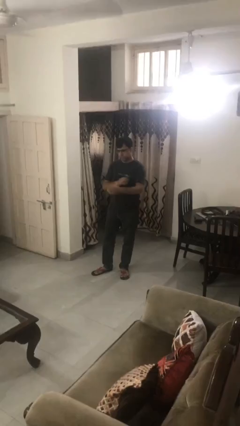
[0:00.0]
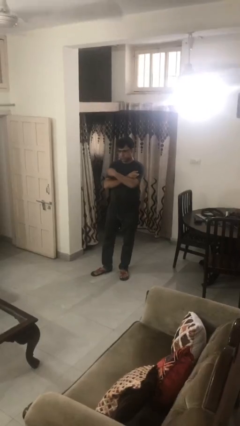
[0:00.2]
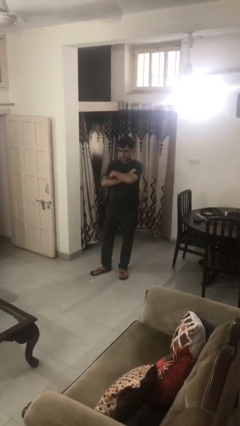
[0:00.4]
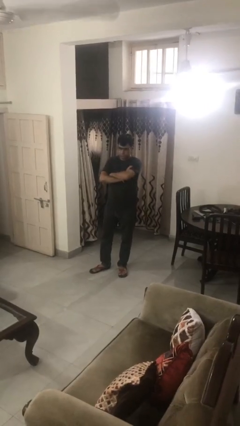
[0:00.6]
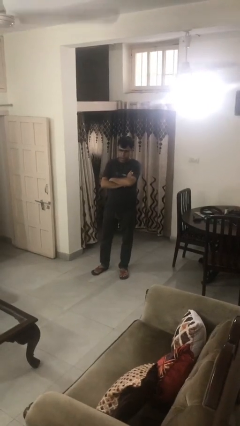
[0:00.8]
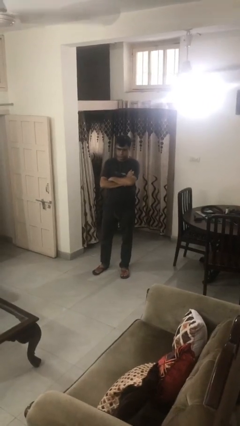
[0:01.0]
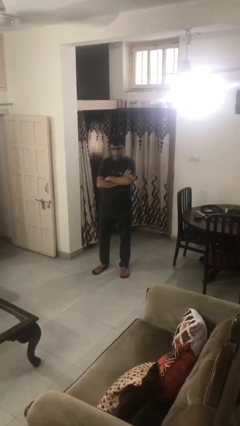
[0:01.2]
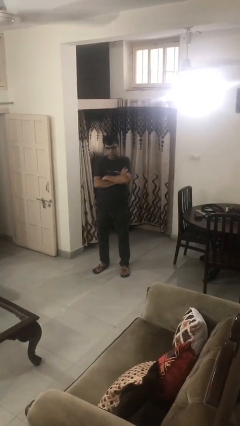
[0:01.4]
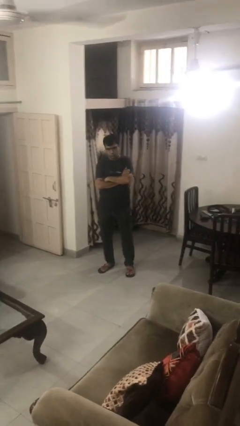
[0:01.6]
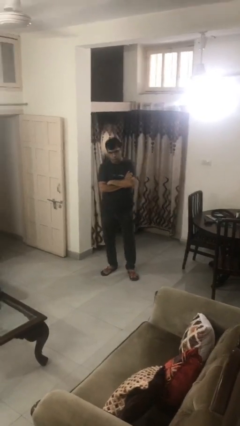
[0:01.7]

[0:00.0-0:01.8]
person crosses arms

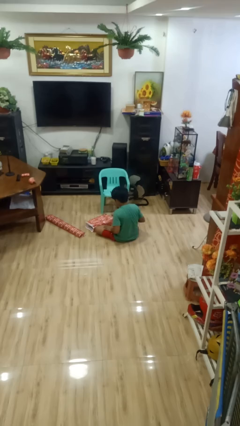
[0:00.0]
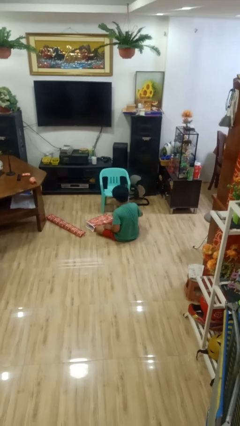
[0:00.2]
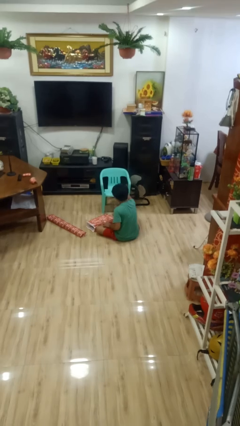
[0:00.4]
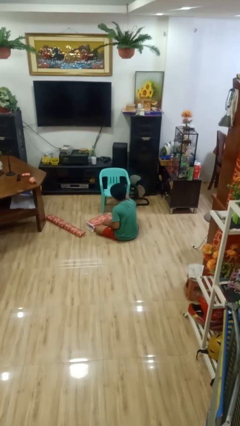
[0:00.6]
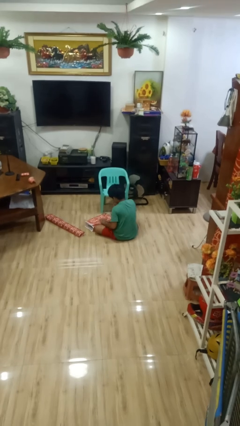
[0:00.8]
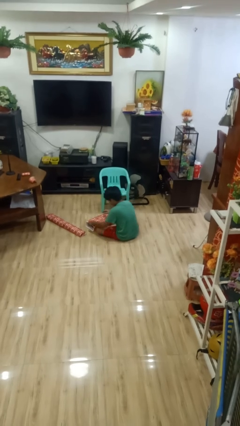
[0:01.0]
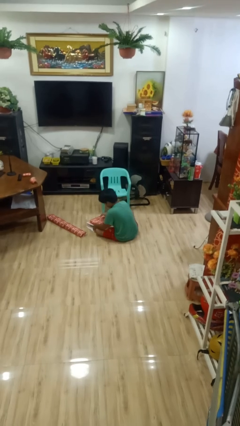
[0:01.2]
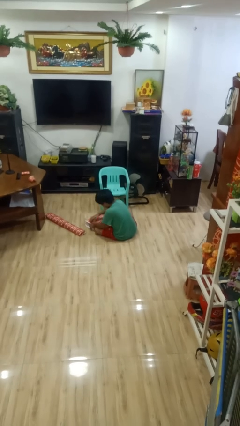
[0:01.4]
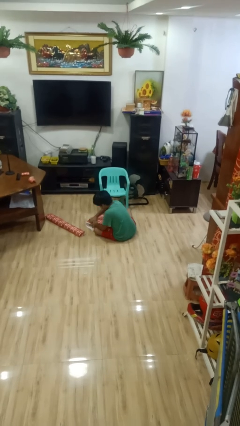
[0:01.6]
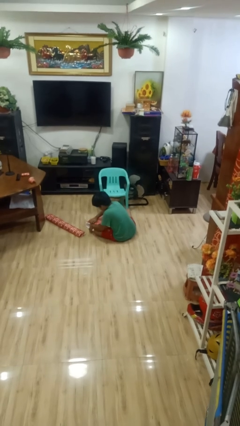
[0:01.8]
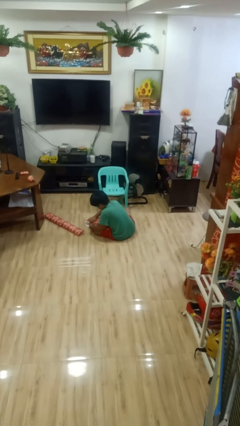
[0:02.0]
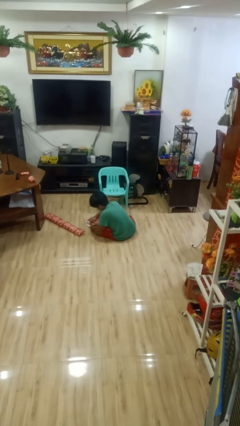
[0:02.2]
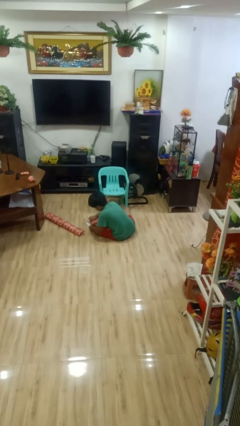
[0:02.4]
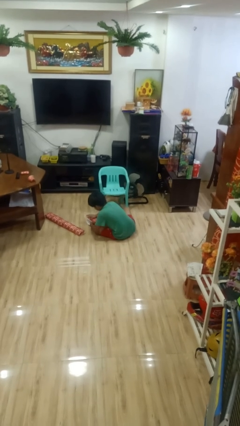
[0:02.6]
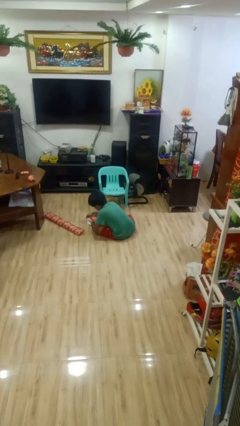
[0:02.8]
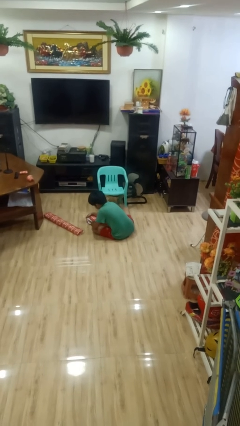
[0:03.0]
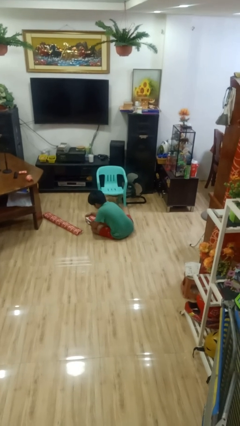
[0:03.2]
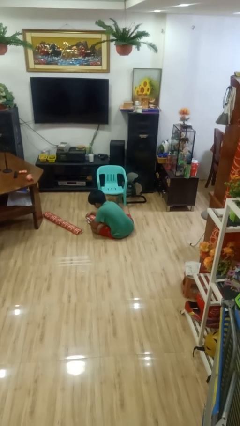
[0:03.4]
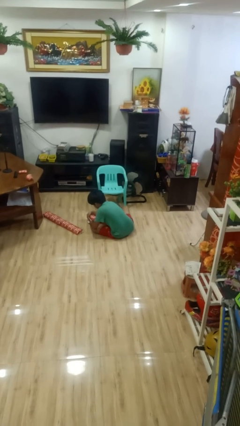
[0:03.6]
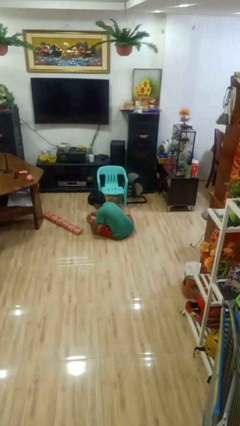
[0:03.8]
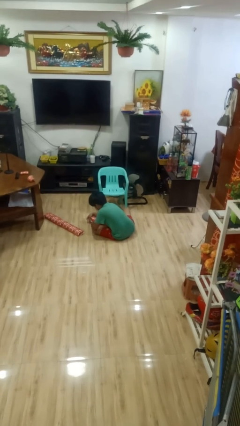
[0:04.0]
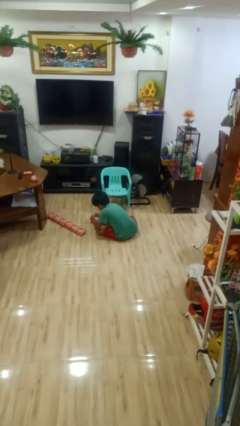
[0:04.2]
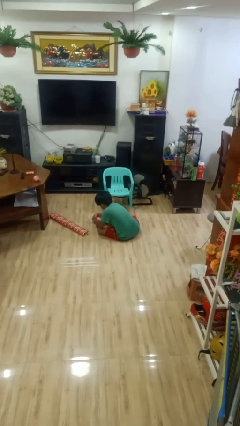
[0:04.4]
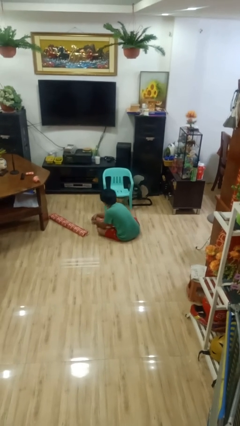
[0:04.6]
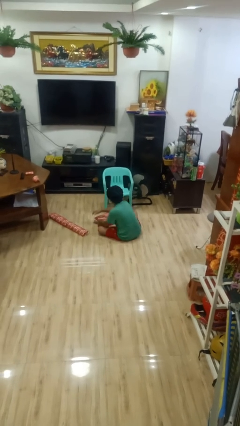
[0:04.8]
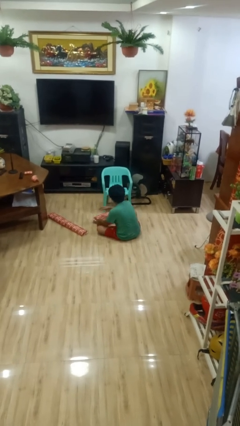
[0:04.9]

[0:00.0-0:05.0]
person wraps box

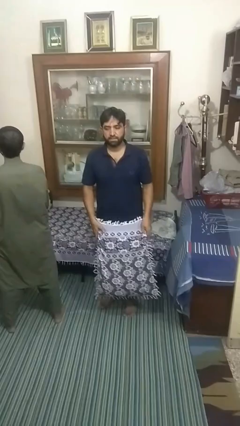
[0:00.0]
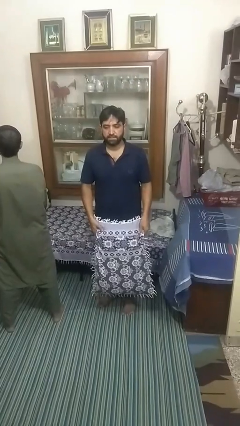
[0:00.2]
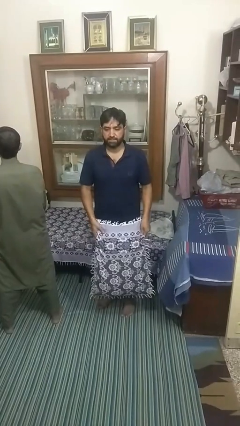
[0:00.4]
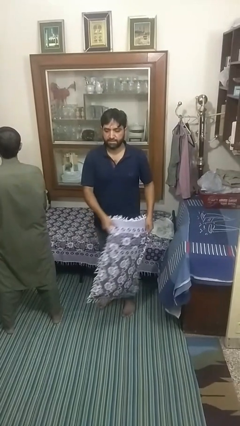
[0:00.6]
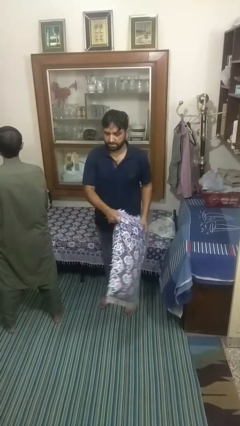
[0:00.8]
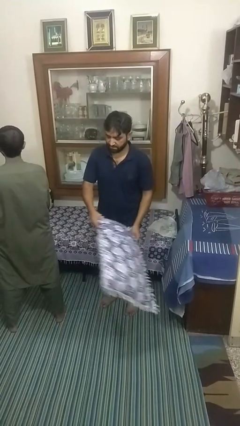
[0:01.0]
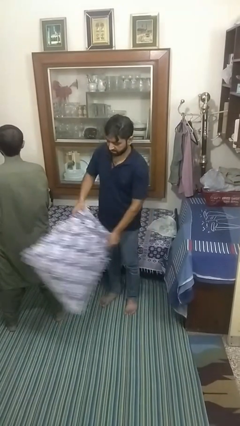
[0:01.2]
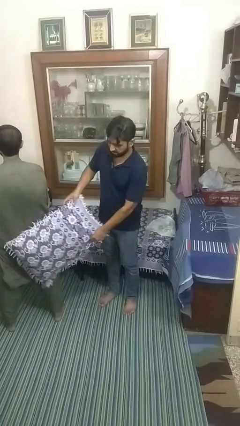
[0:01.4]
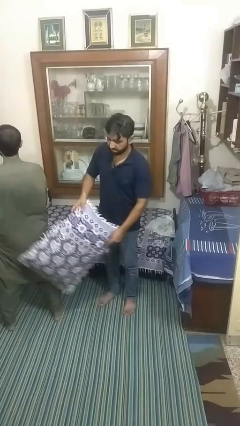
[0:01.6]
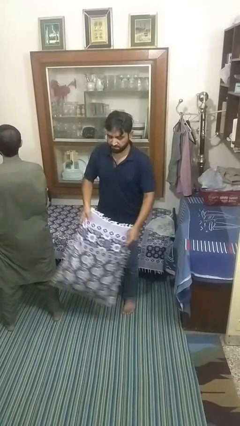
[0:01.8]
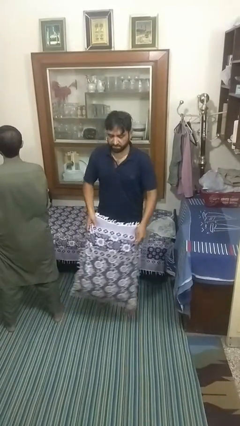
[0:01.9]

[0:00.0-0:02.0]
person hits person with pillow

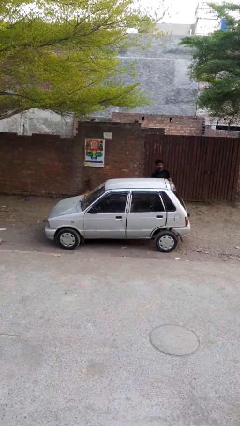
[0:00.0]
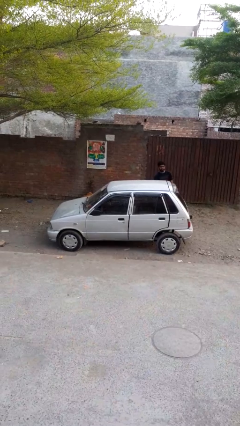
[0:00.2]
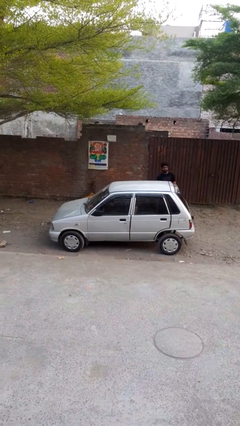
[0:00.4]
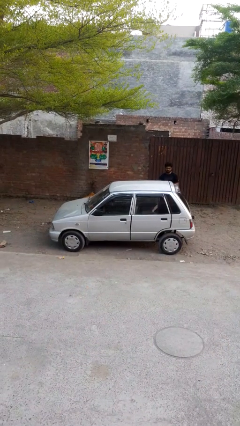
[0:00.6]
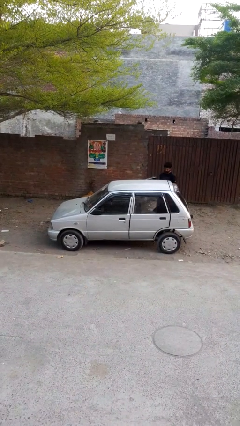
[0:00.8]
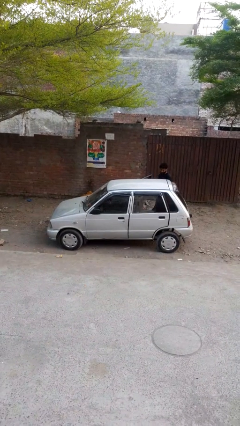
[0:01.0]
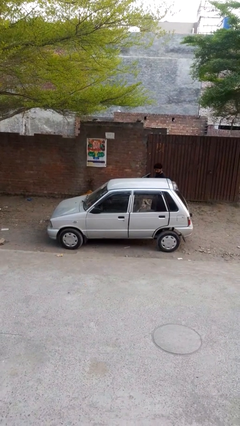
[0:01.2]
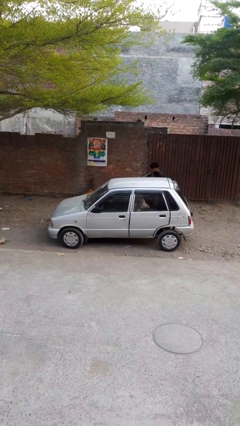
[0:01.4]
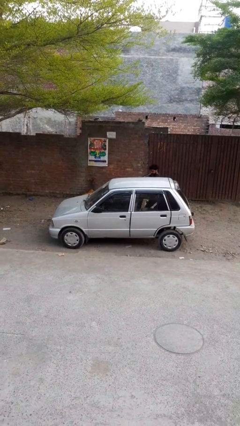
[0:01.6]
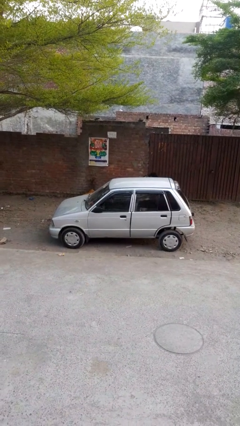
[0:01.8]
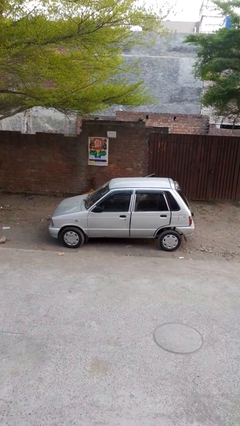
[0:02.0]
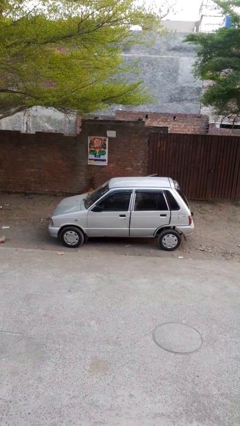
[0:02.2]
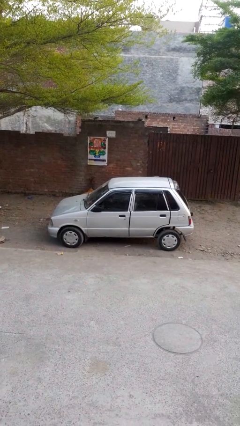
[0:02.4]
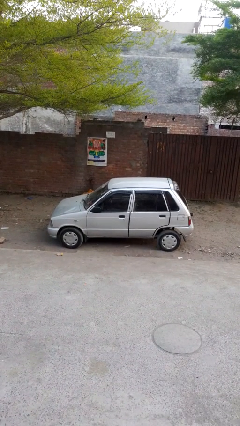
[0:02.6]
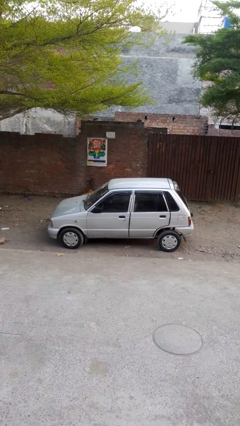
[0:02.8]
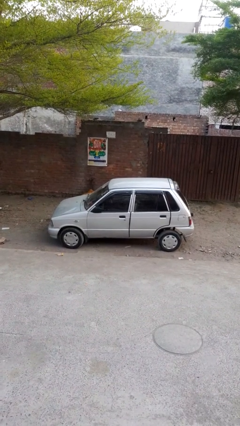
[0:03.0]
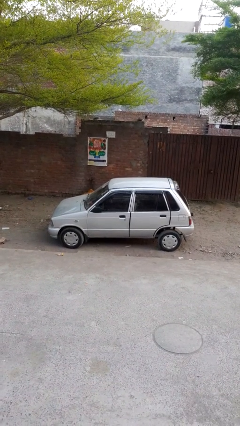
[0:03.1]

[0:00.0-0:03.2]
car picks up person

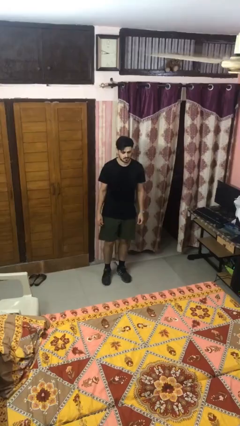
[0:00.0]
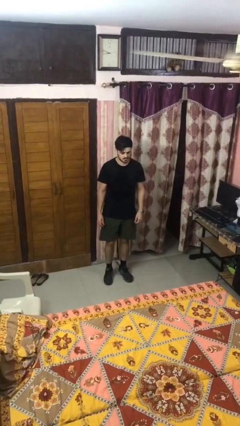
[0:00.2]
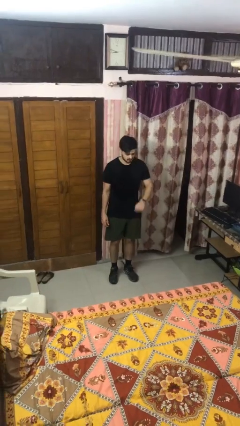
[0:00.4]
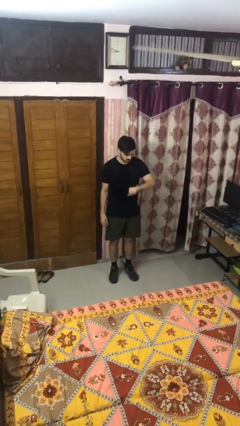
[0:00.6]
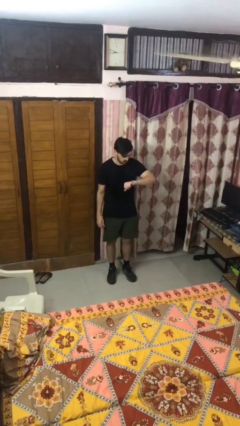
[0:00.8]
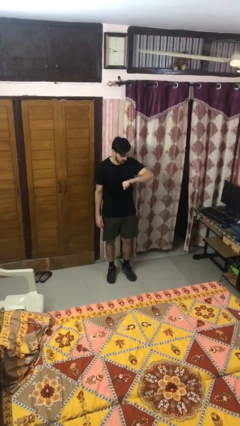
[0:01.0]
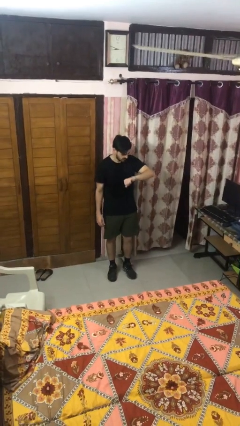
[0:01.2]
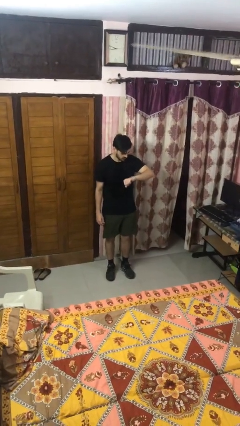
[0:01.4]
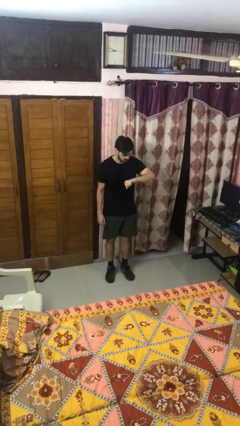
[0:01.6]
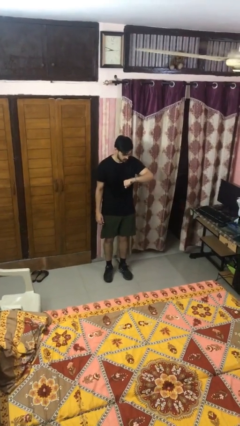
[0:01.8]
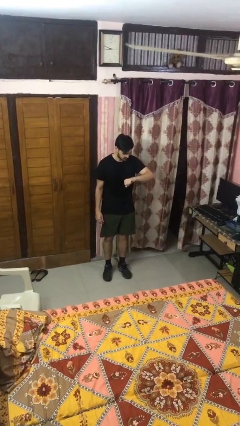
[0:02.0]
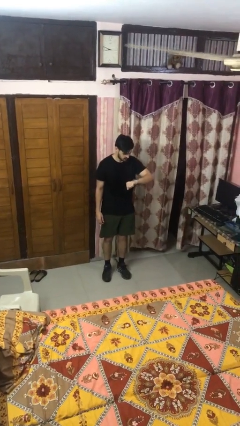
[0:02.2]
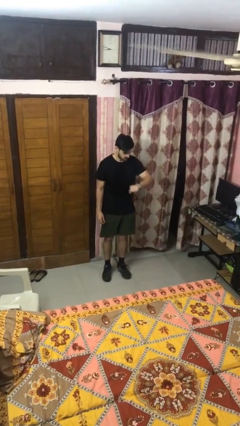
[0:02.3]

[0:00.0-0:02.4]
person looks at wristwatch

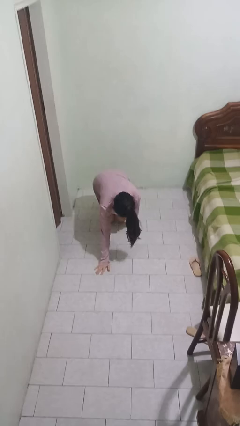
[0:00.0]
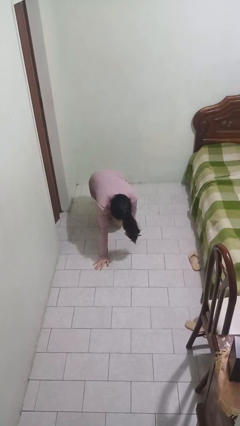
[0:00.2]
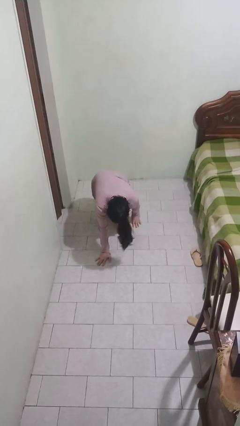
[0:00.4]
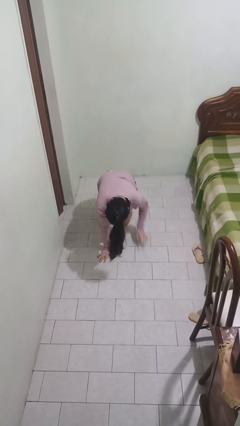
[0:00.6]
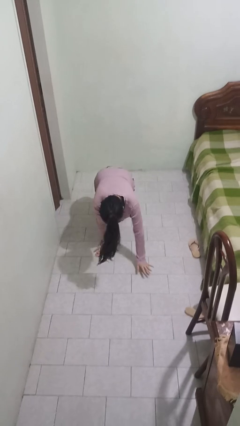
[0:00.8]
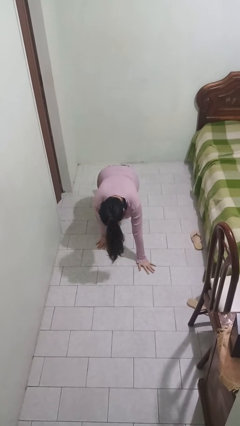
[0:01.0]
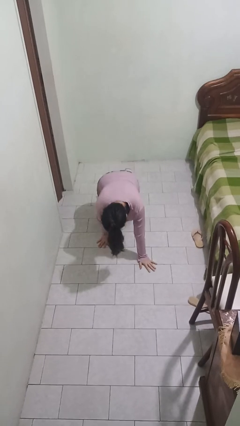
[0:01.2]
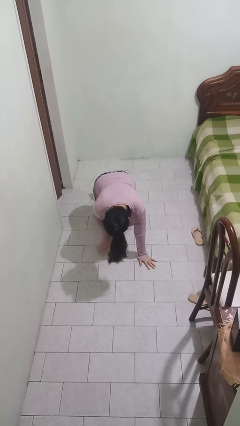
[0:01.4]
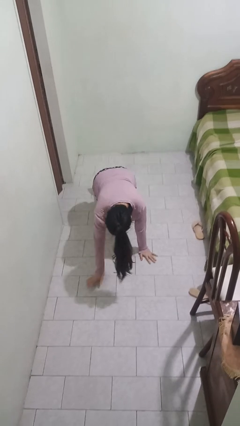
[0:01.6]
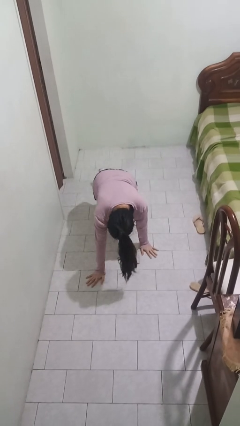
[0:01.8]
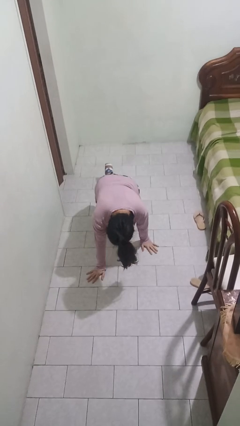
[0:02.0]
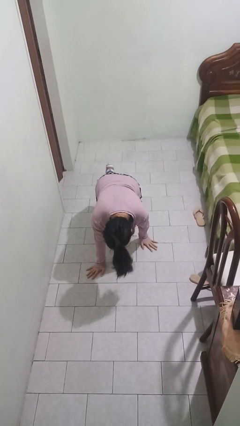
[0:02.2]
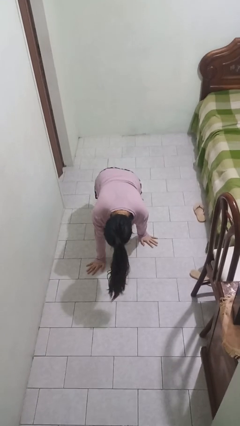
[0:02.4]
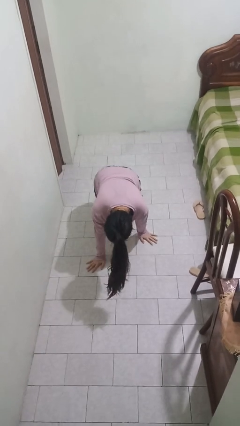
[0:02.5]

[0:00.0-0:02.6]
person crawls

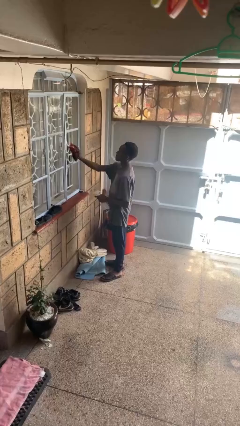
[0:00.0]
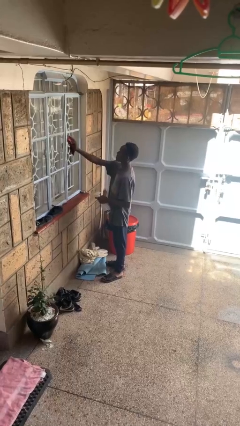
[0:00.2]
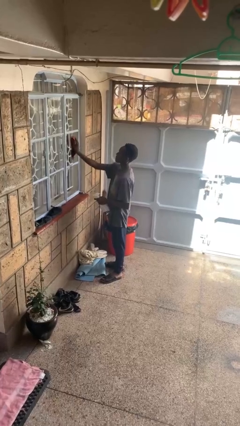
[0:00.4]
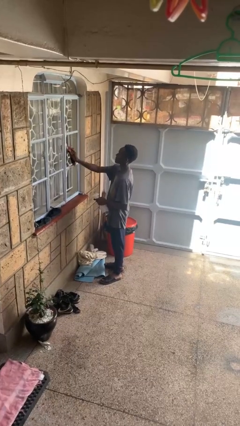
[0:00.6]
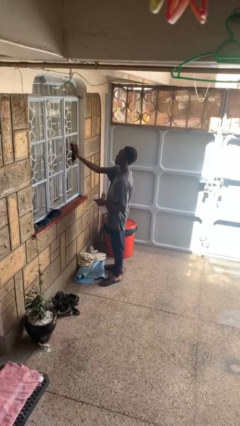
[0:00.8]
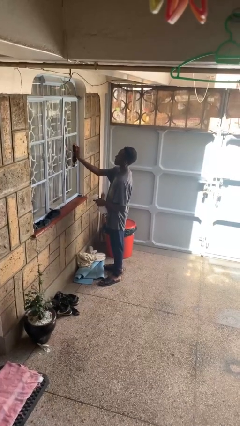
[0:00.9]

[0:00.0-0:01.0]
person washes window
